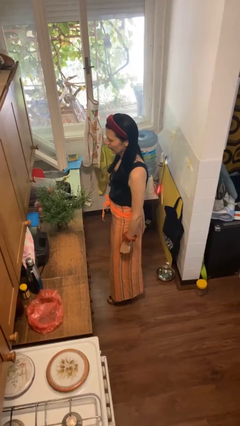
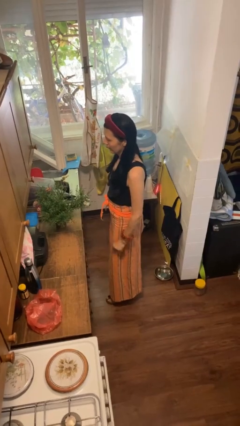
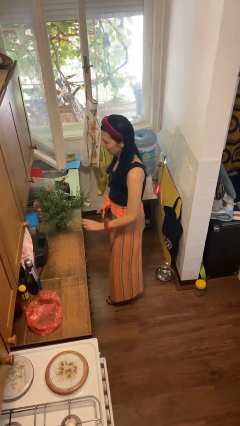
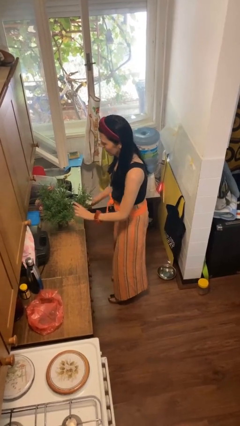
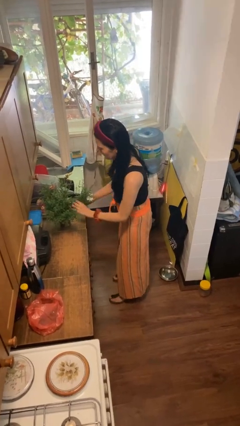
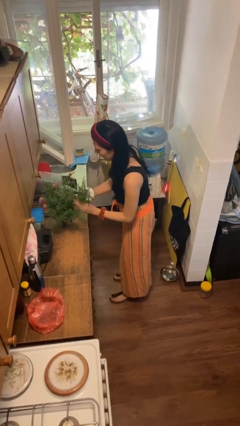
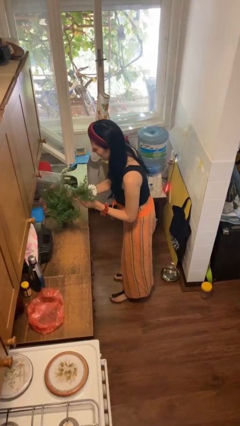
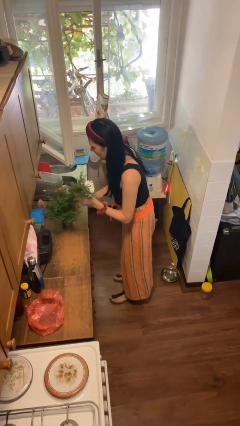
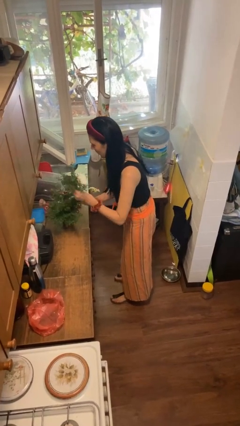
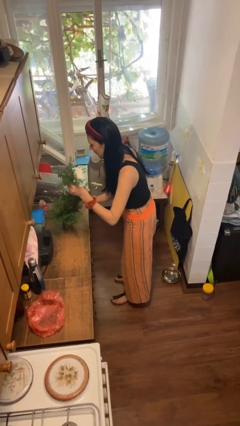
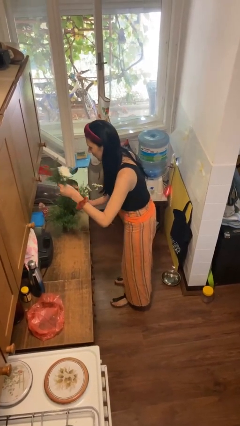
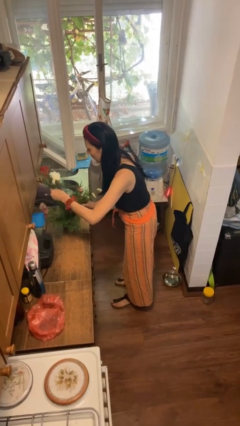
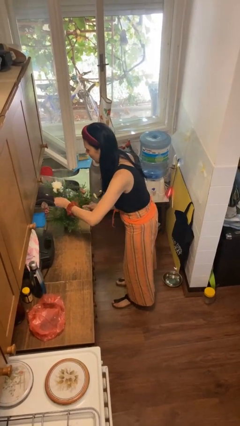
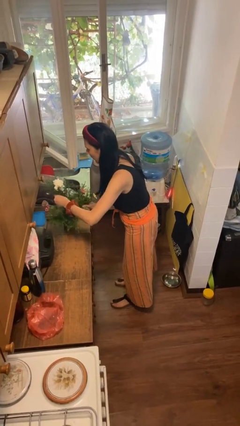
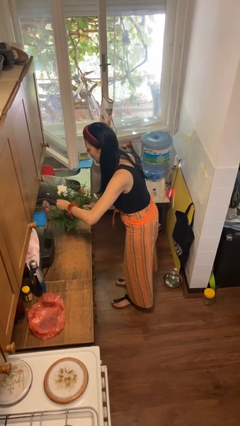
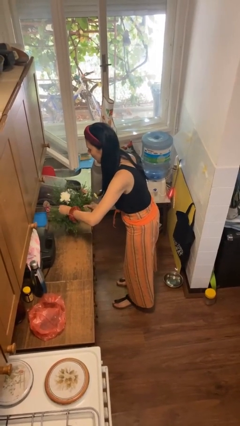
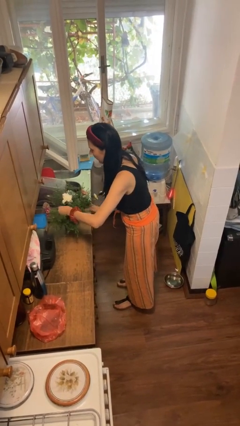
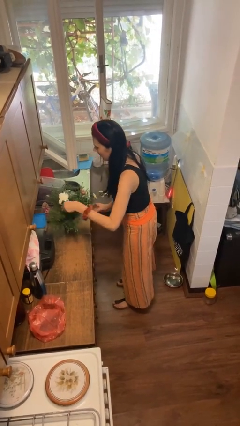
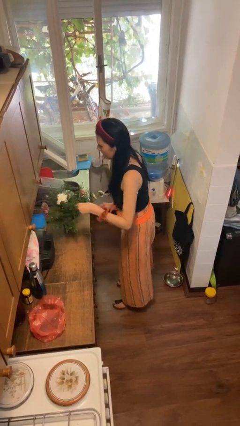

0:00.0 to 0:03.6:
person arranges flowers in vase

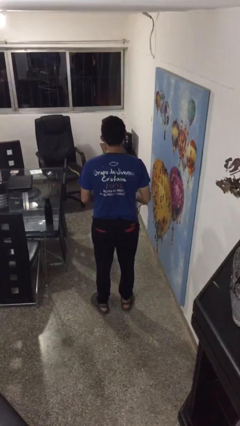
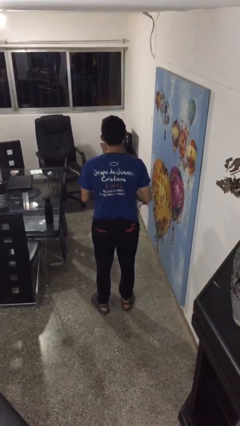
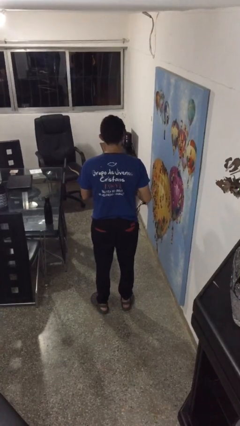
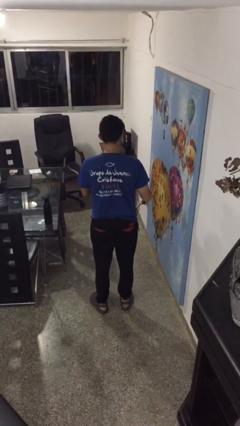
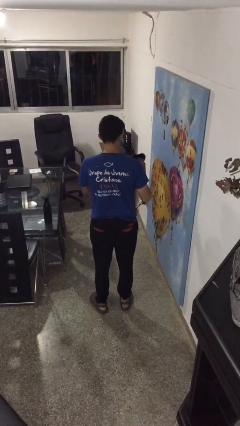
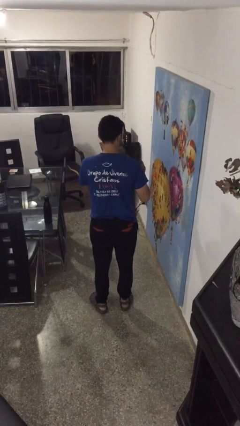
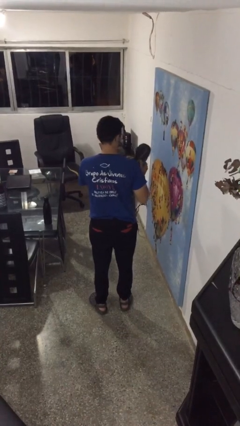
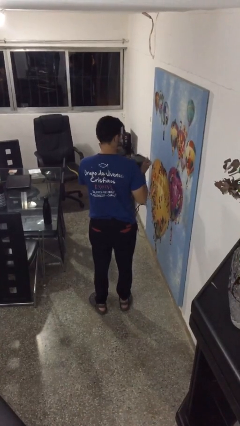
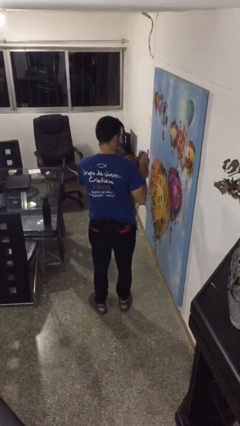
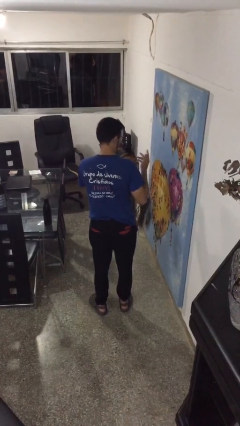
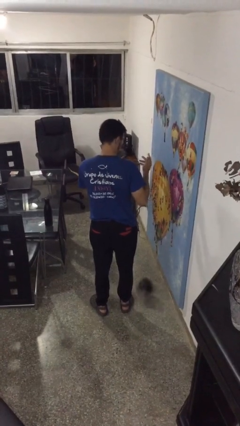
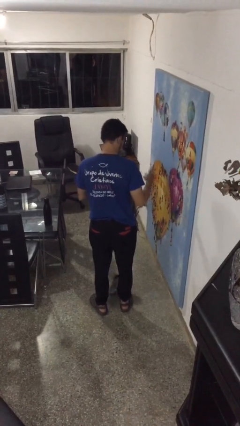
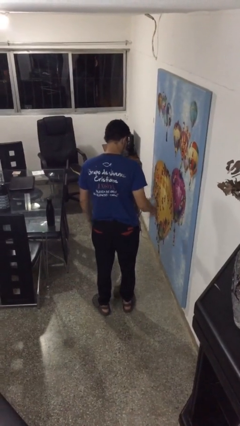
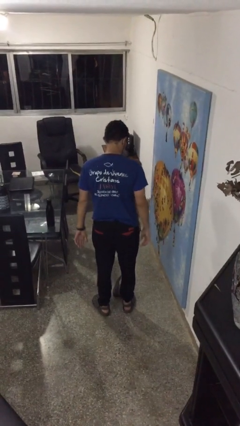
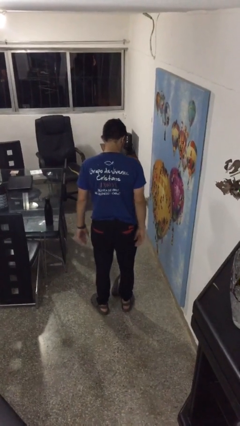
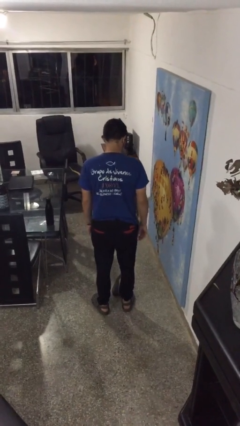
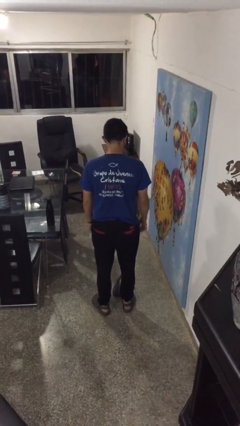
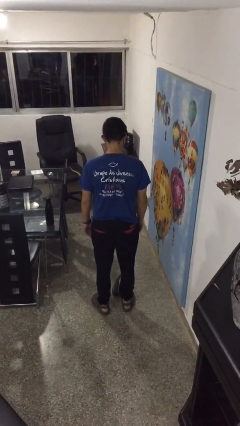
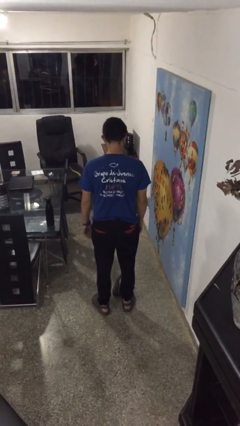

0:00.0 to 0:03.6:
person drops object

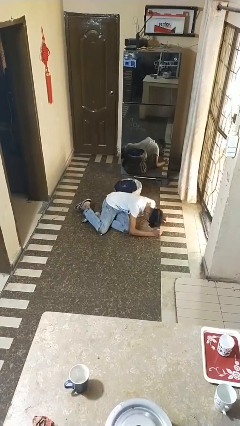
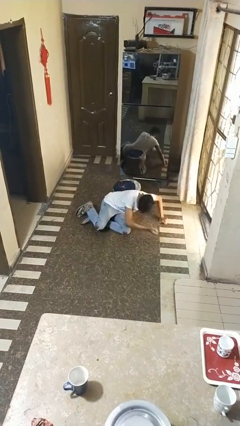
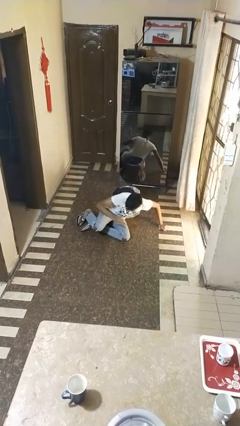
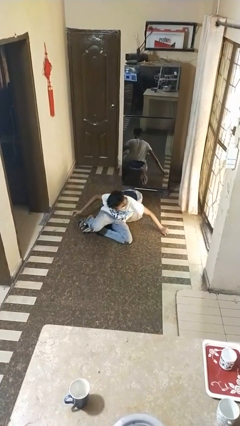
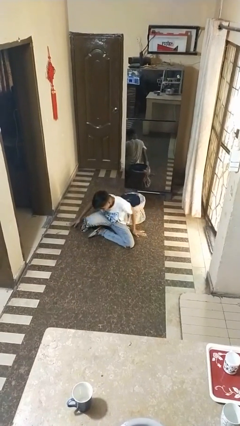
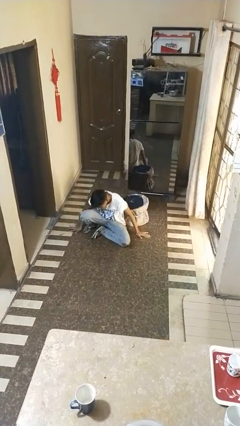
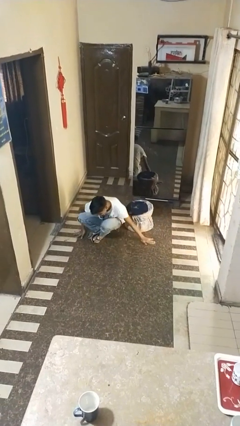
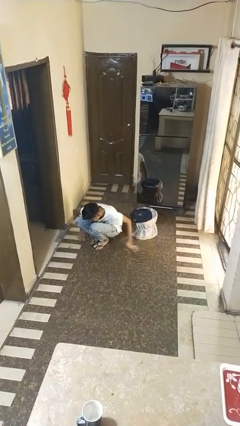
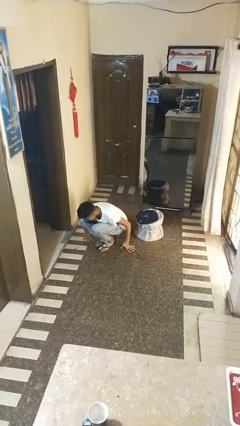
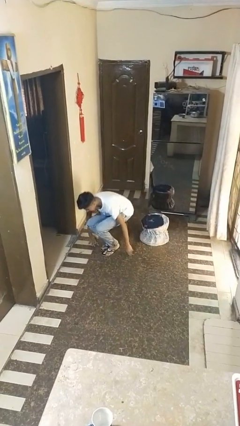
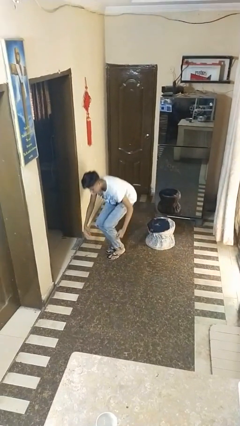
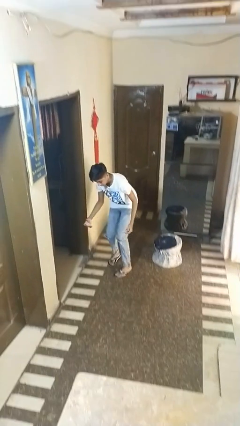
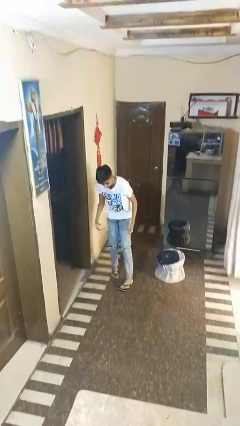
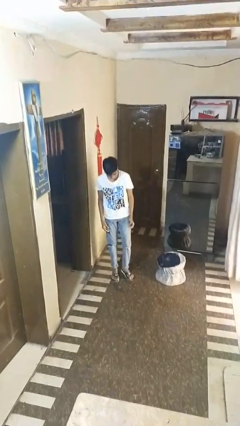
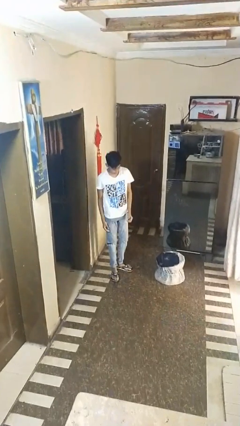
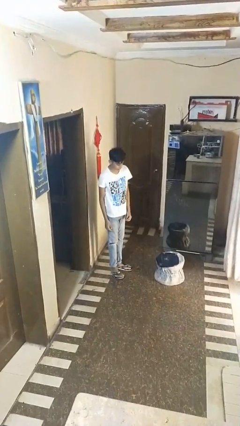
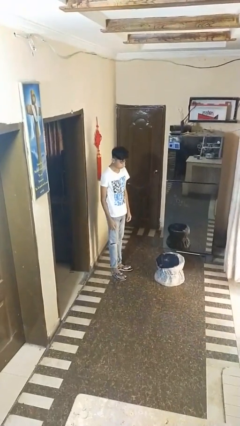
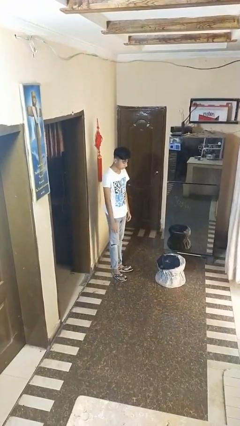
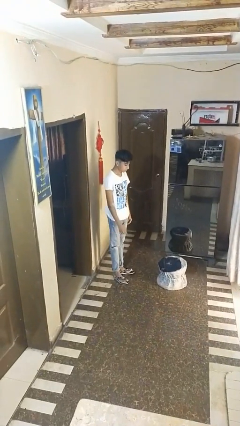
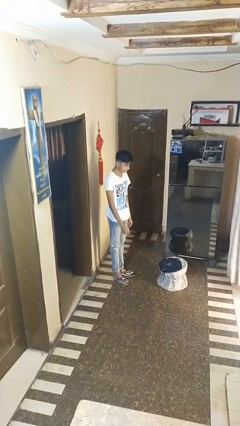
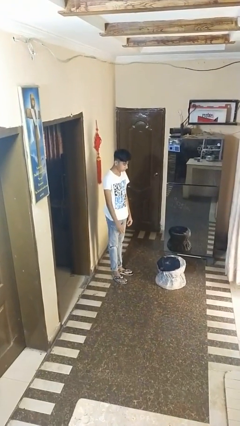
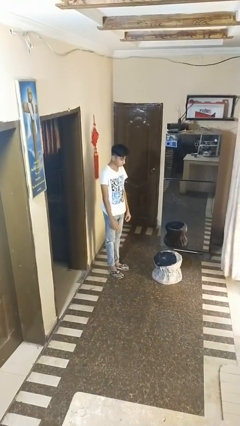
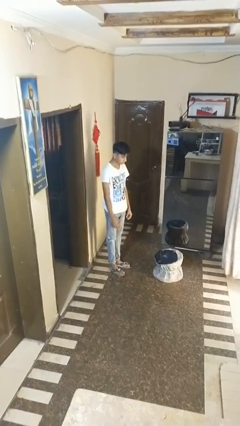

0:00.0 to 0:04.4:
person stands up from floor

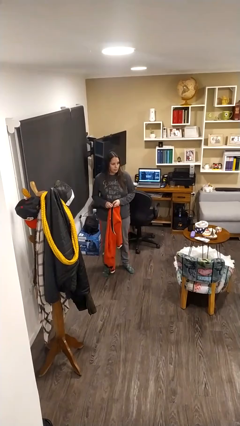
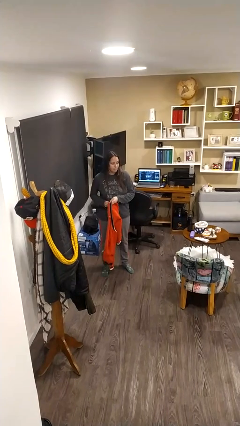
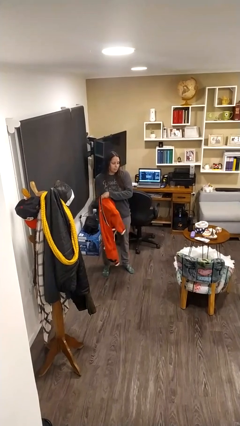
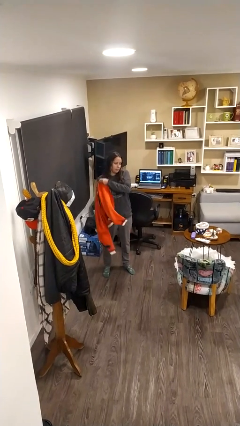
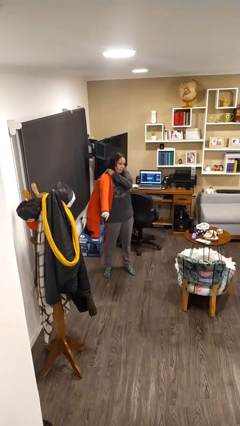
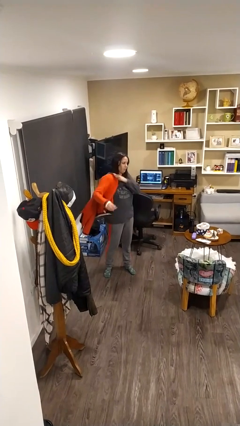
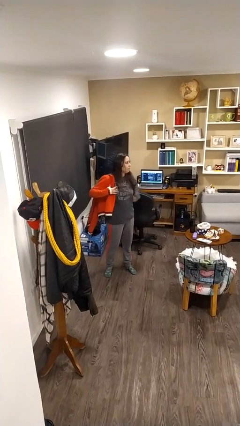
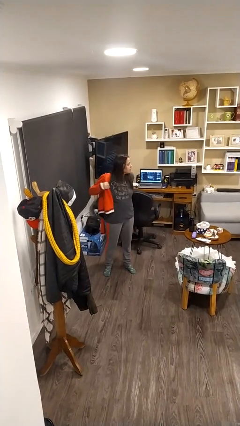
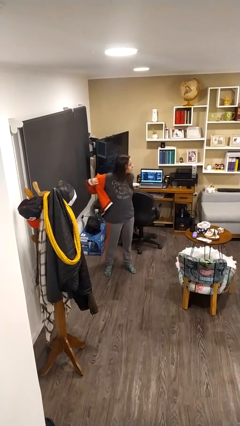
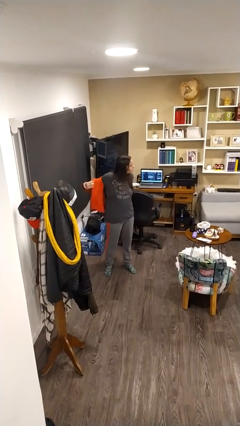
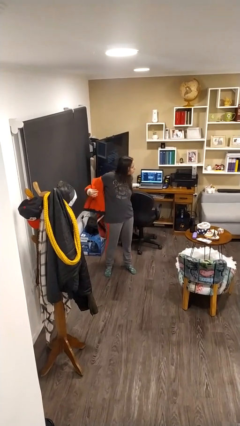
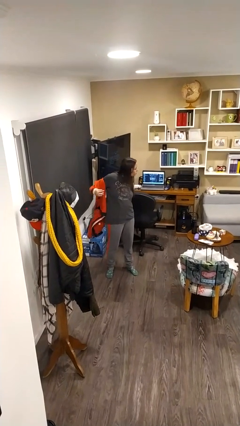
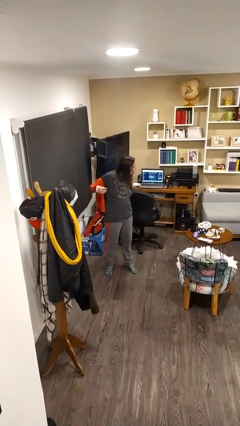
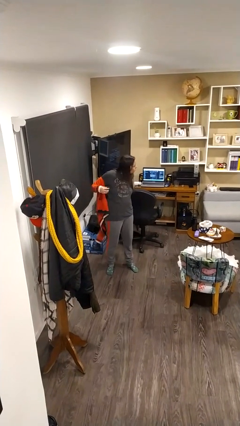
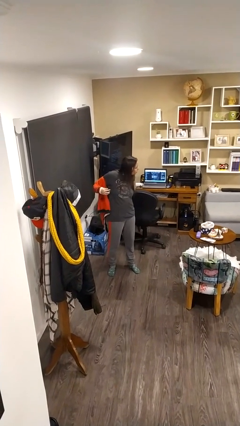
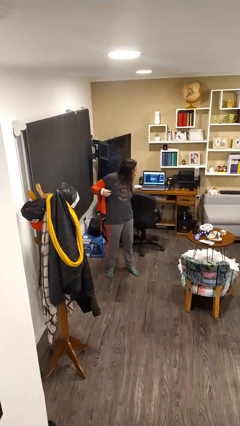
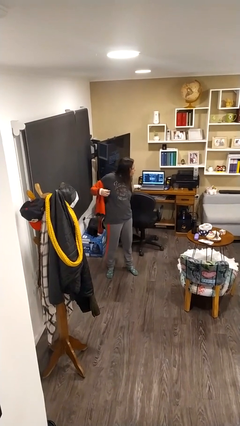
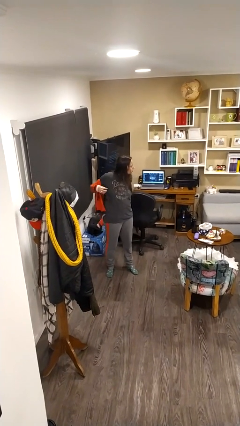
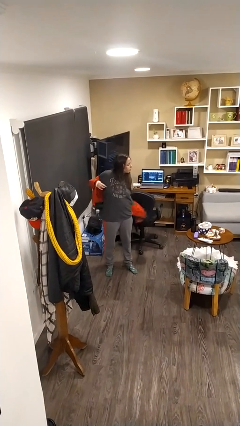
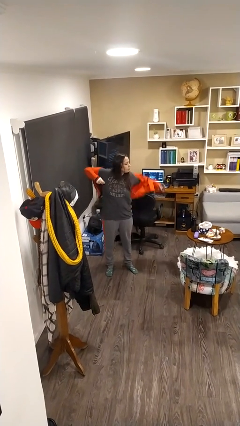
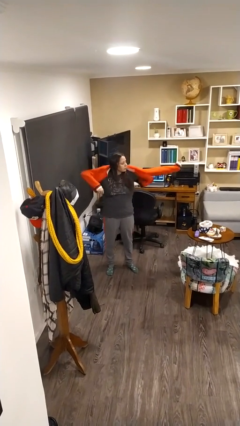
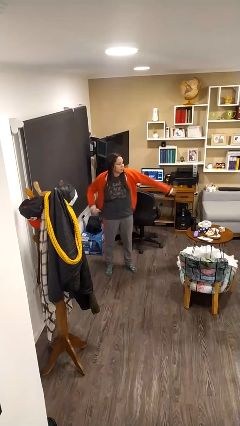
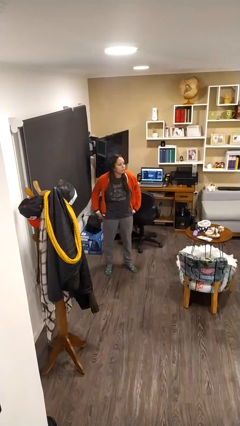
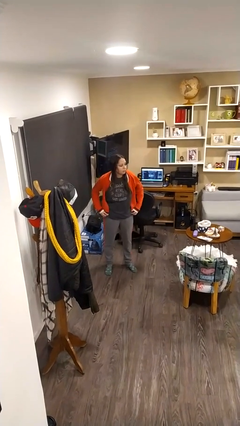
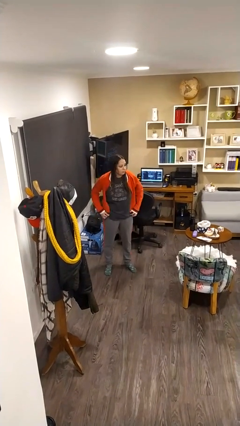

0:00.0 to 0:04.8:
person puts on jacket

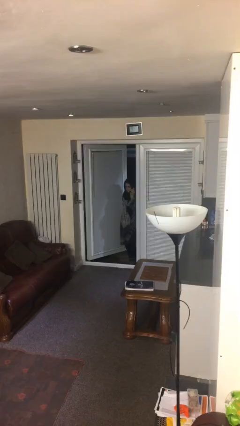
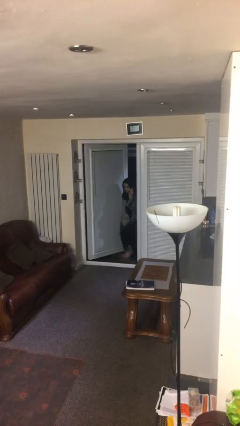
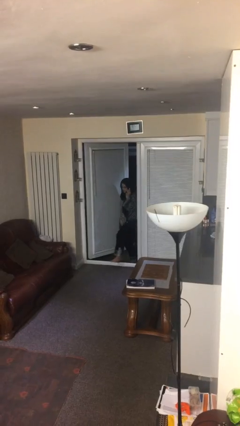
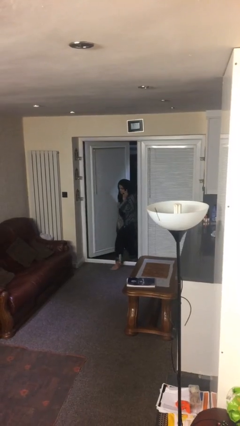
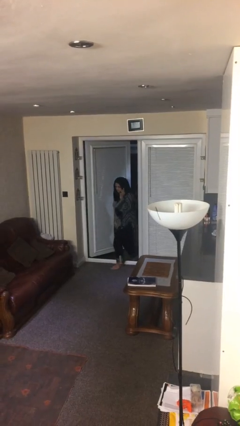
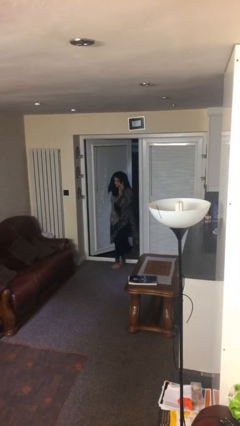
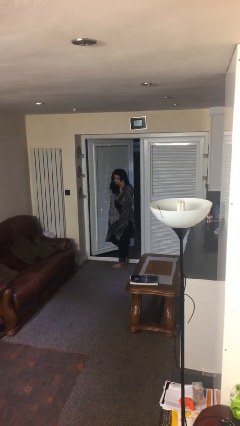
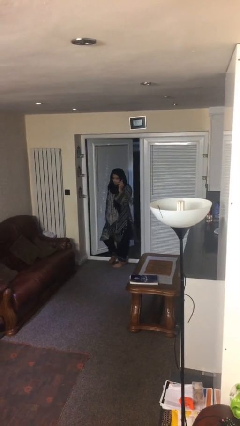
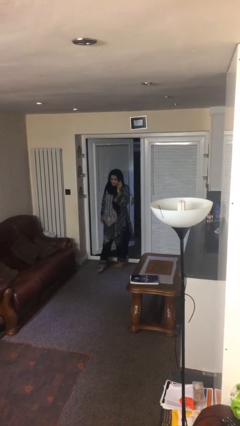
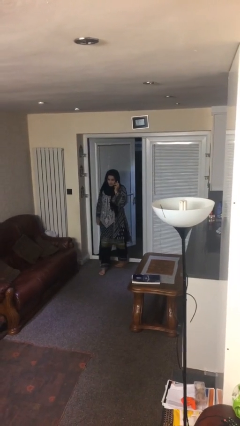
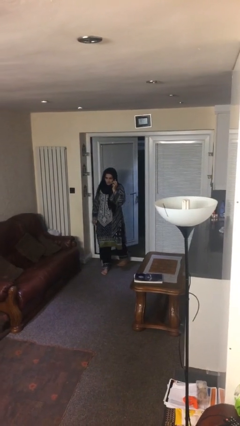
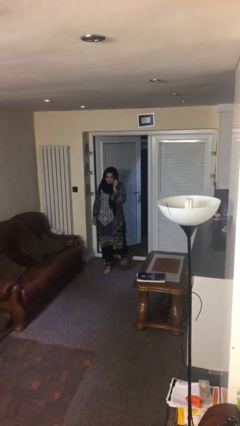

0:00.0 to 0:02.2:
person enters scene through structure
